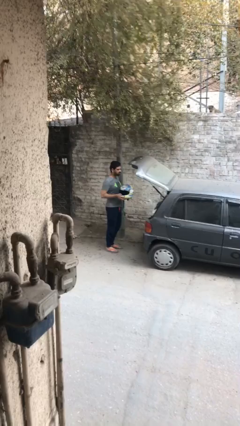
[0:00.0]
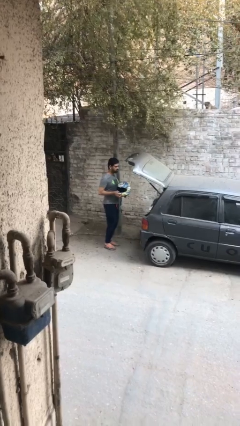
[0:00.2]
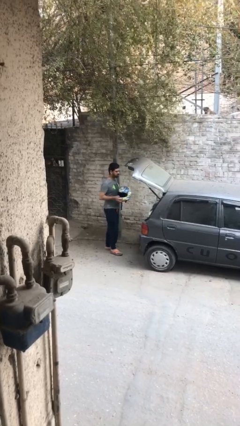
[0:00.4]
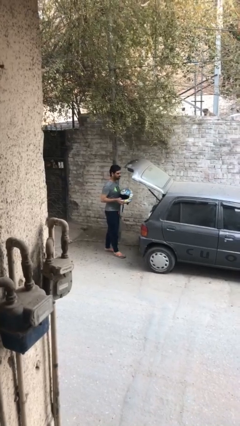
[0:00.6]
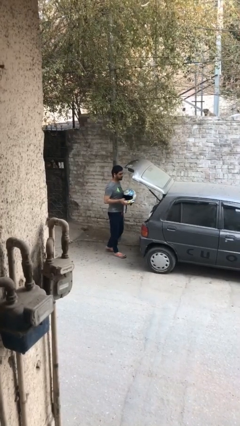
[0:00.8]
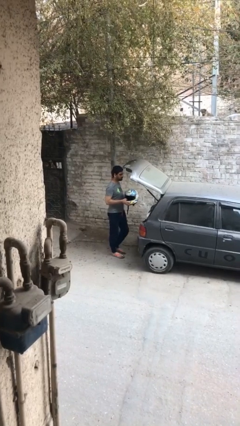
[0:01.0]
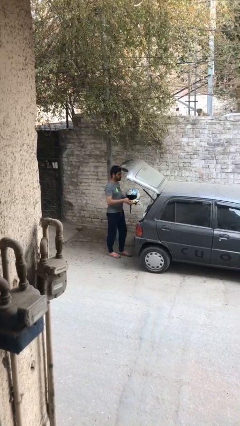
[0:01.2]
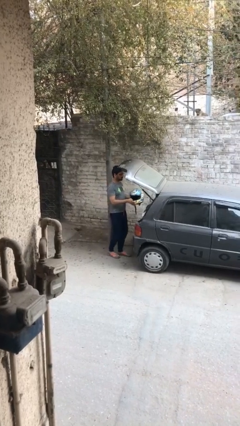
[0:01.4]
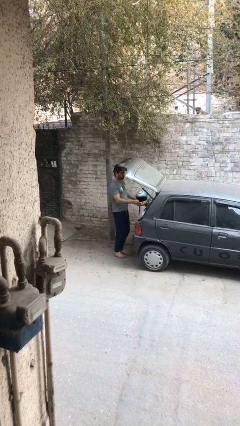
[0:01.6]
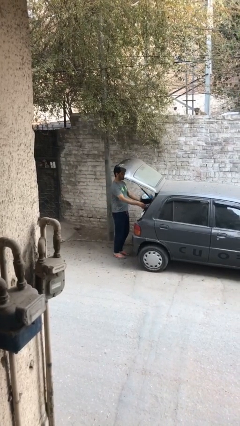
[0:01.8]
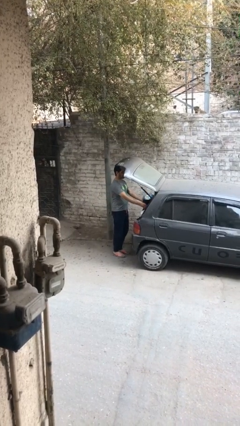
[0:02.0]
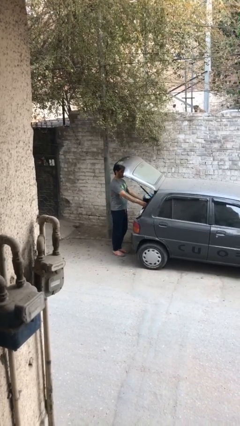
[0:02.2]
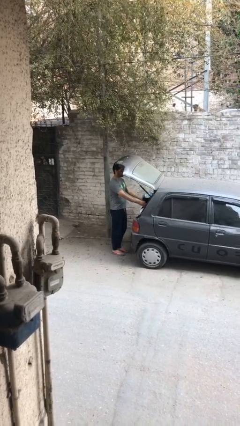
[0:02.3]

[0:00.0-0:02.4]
person loads car

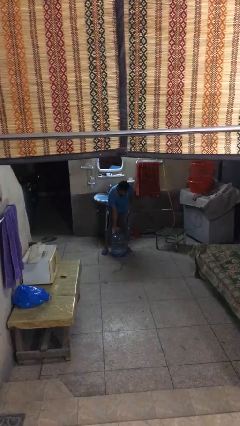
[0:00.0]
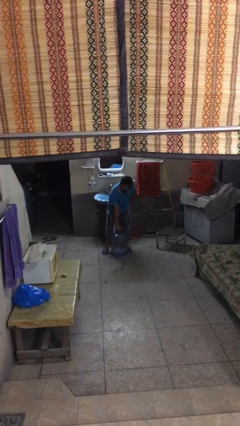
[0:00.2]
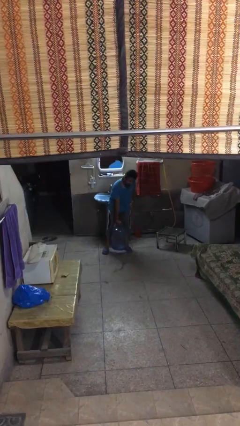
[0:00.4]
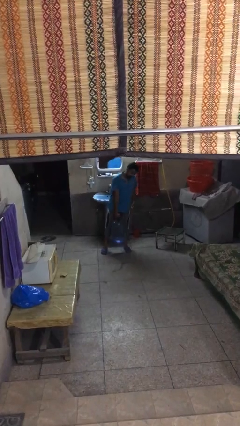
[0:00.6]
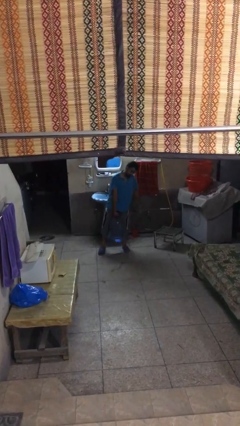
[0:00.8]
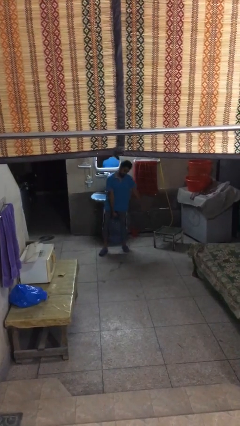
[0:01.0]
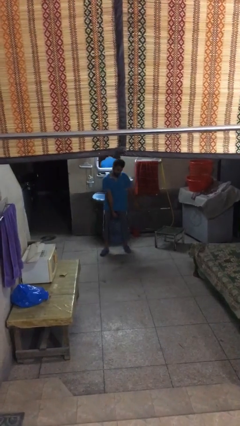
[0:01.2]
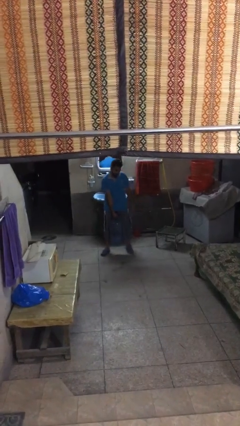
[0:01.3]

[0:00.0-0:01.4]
person picks up object from floor

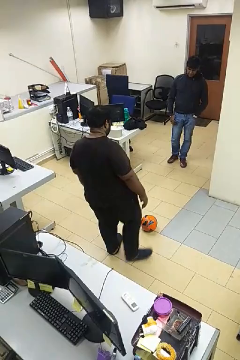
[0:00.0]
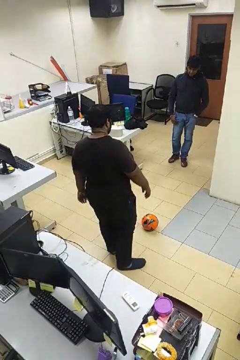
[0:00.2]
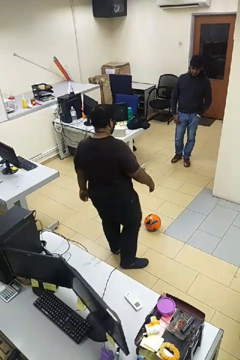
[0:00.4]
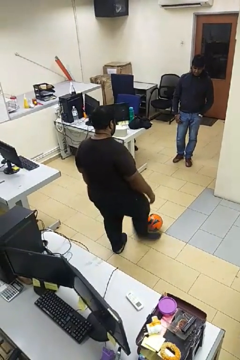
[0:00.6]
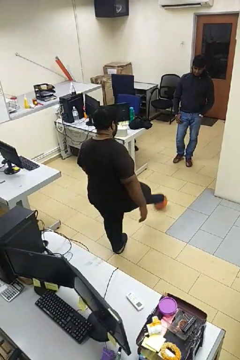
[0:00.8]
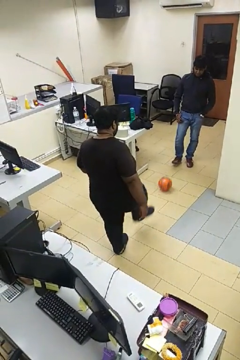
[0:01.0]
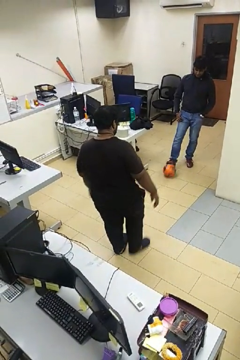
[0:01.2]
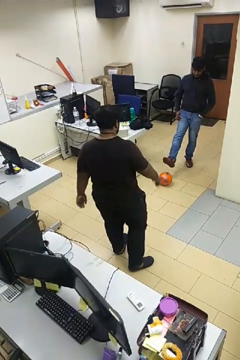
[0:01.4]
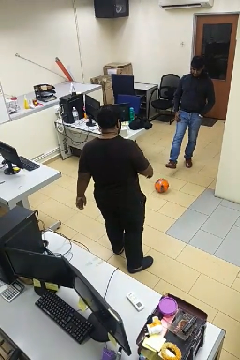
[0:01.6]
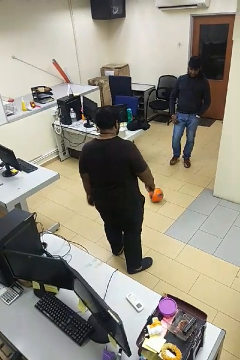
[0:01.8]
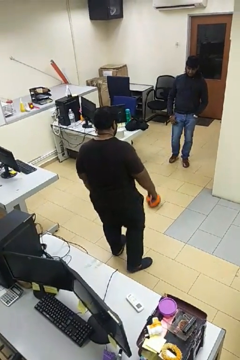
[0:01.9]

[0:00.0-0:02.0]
person kicks object to person

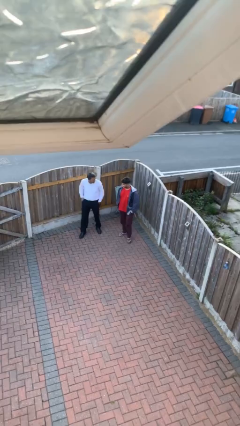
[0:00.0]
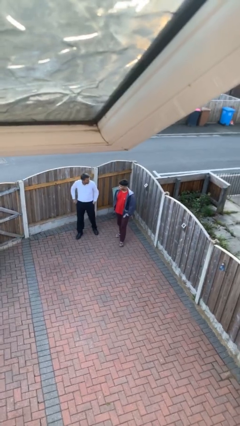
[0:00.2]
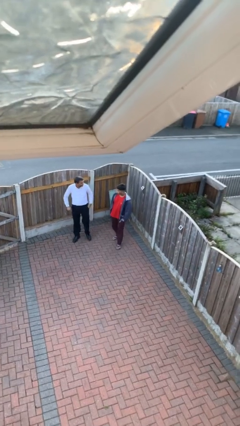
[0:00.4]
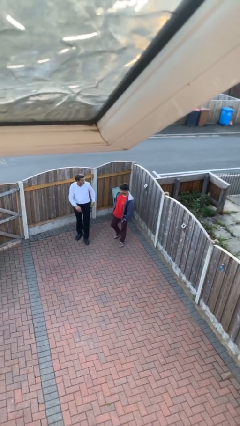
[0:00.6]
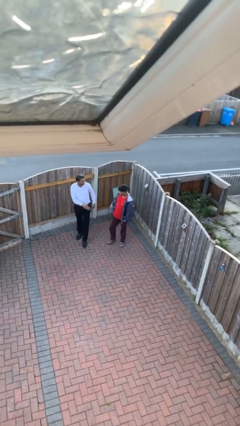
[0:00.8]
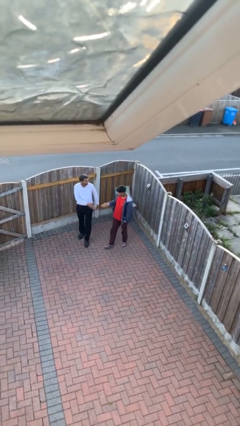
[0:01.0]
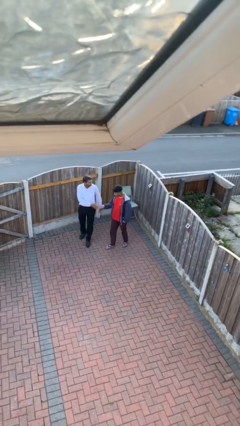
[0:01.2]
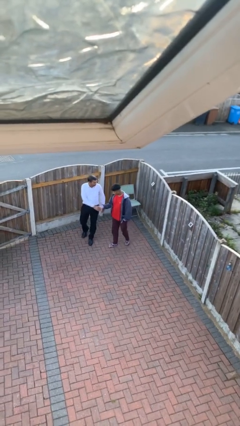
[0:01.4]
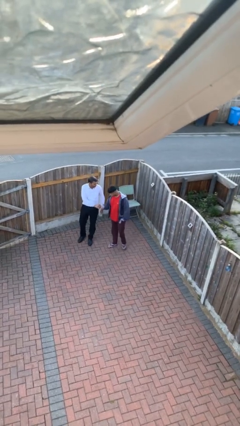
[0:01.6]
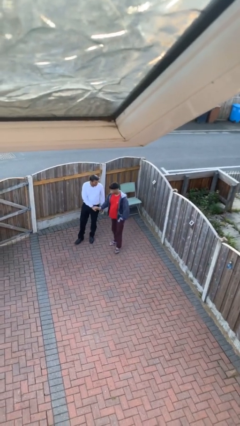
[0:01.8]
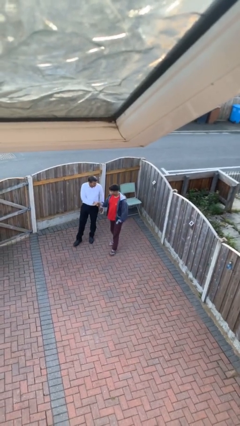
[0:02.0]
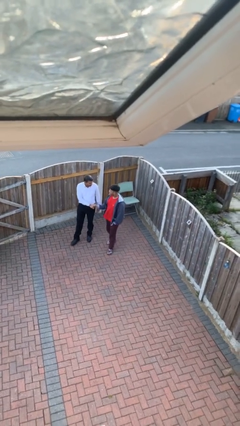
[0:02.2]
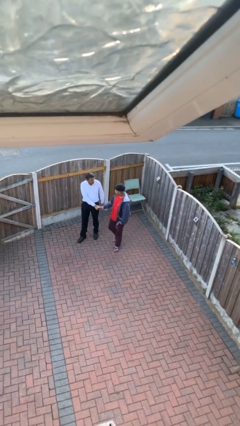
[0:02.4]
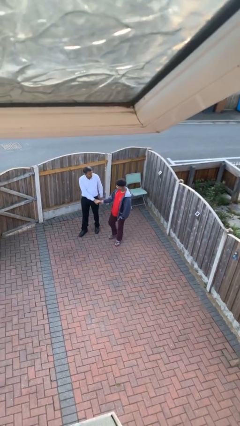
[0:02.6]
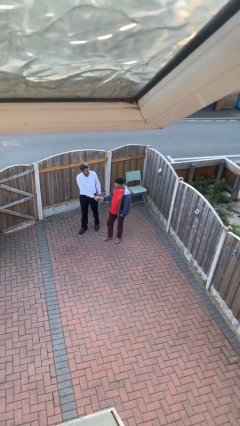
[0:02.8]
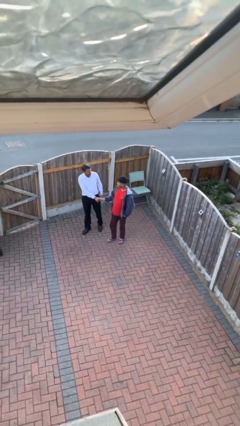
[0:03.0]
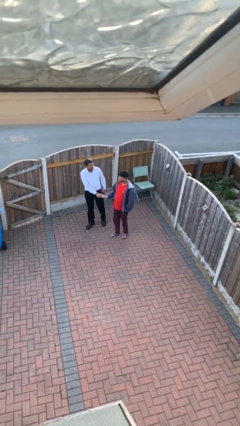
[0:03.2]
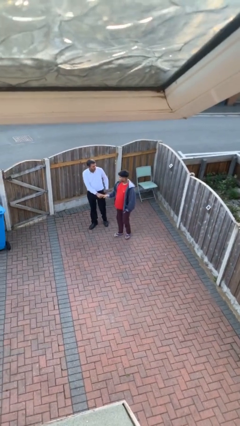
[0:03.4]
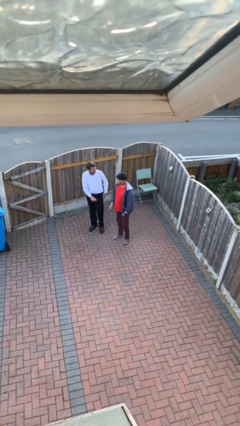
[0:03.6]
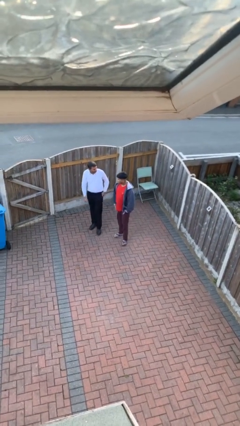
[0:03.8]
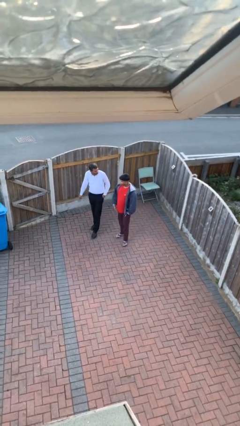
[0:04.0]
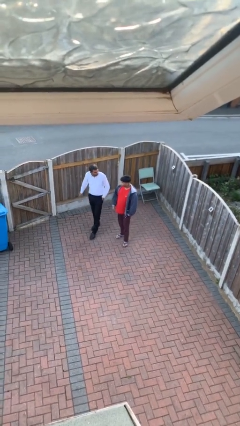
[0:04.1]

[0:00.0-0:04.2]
person shakes hand

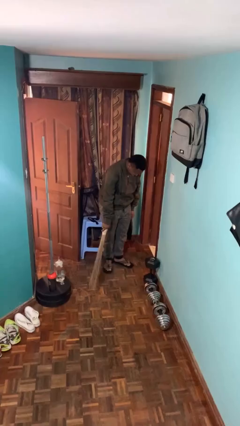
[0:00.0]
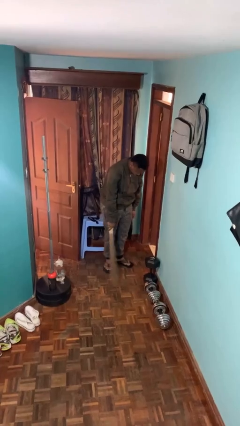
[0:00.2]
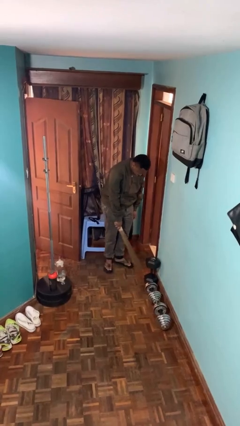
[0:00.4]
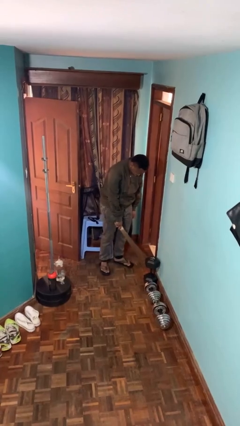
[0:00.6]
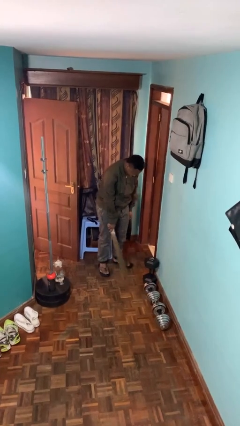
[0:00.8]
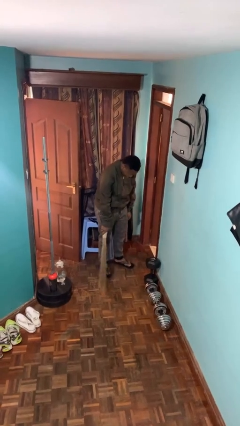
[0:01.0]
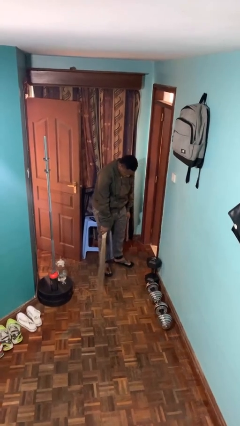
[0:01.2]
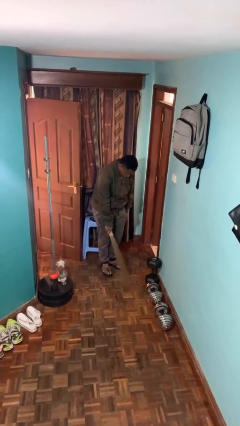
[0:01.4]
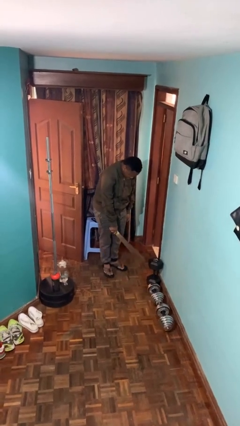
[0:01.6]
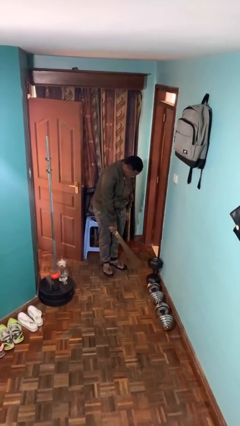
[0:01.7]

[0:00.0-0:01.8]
person sweeps floor

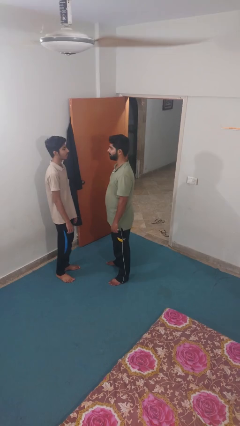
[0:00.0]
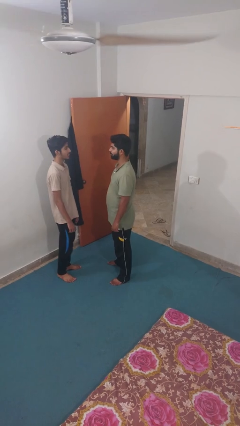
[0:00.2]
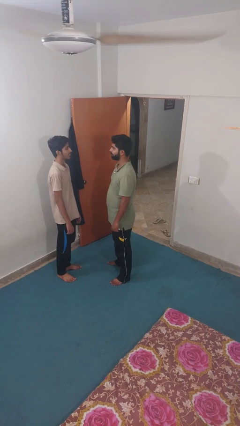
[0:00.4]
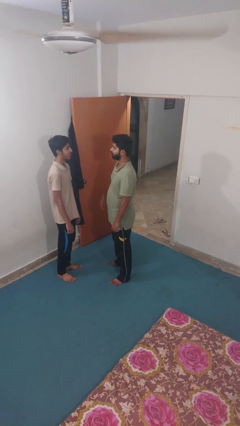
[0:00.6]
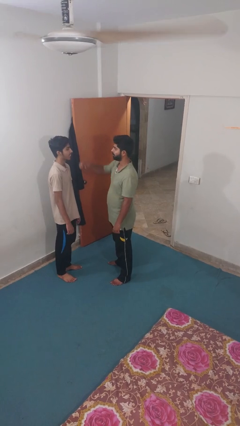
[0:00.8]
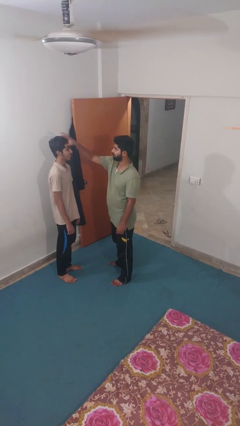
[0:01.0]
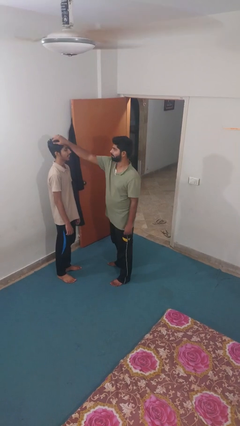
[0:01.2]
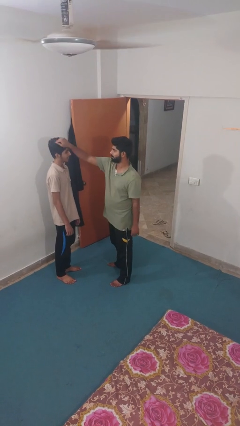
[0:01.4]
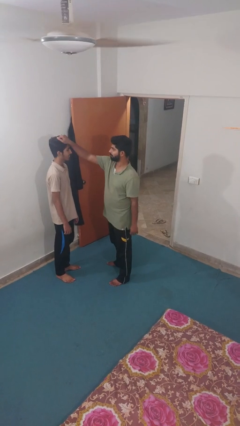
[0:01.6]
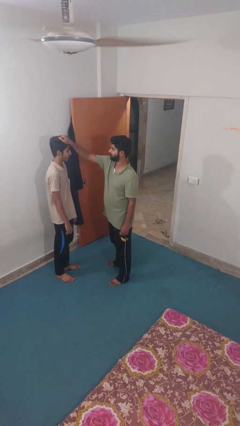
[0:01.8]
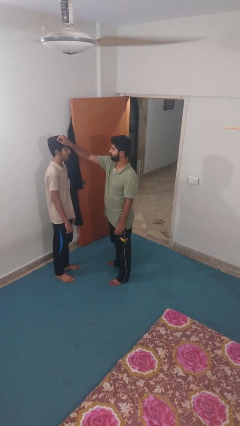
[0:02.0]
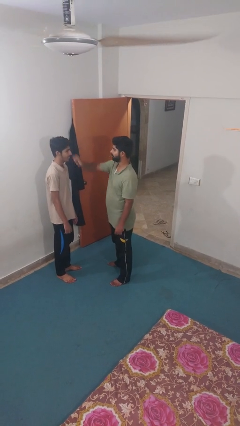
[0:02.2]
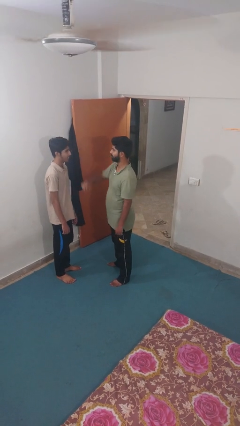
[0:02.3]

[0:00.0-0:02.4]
person grabs person by hair

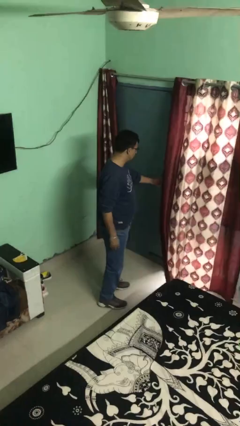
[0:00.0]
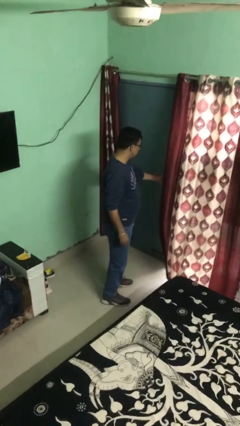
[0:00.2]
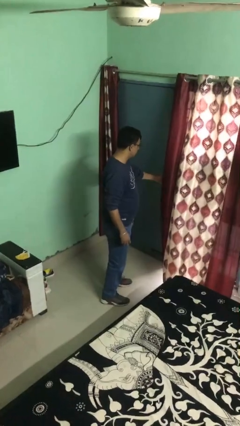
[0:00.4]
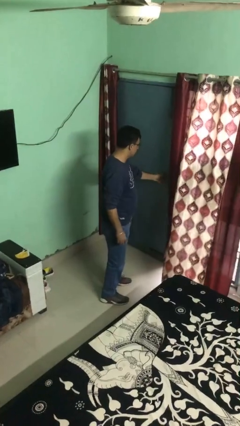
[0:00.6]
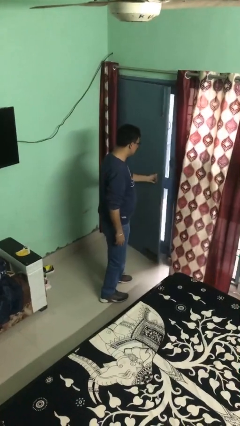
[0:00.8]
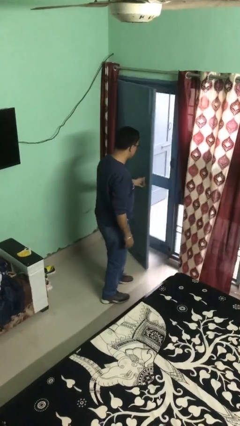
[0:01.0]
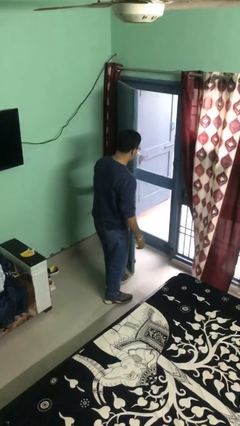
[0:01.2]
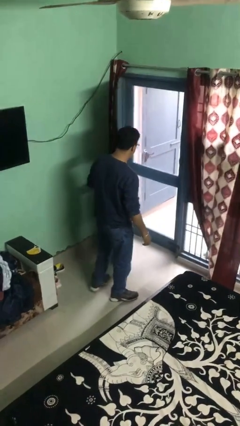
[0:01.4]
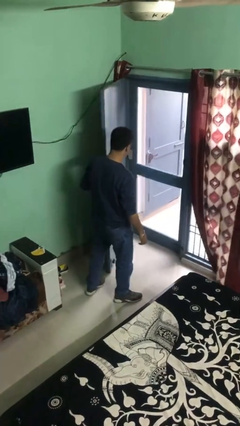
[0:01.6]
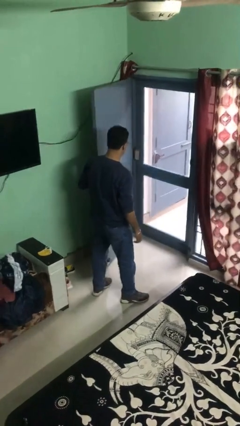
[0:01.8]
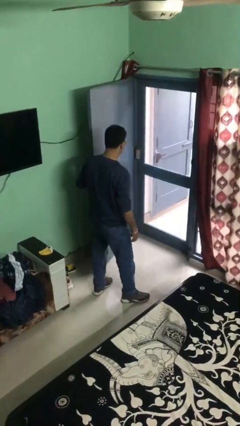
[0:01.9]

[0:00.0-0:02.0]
person opens facility door

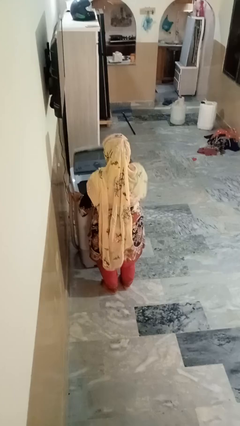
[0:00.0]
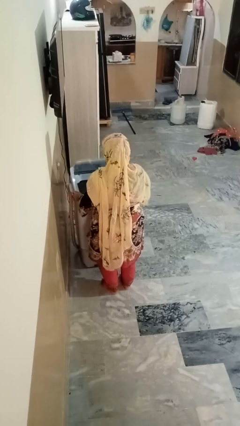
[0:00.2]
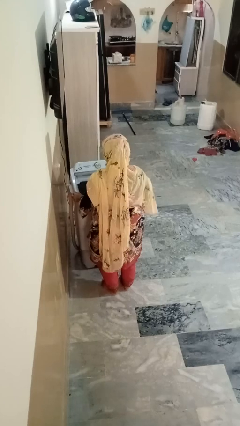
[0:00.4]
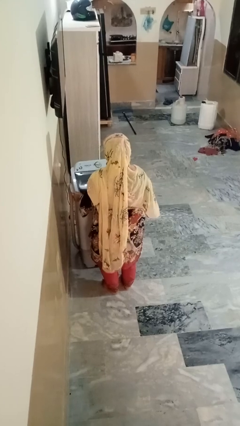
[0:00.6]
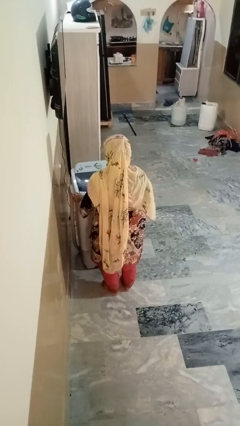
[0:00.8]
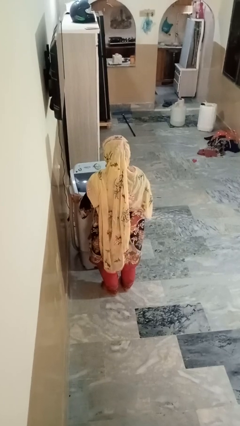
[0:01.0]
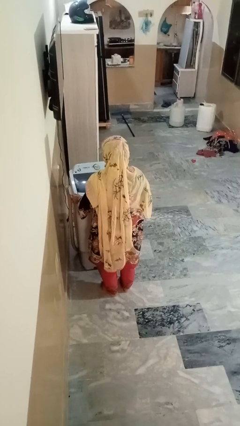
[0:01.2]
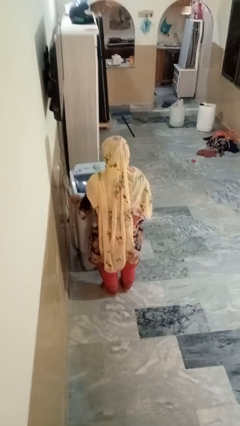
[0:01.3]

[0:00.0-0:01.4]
person closes clothes washer
